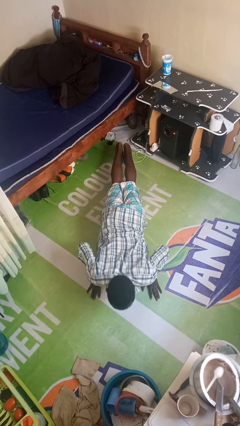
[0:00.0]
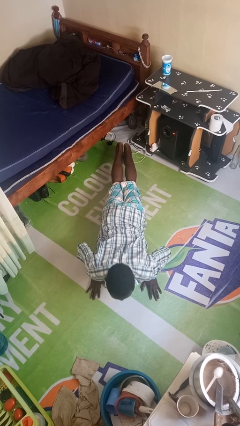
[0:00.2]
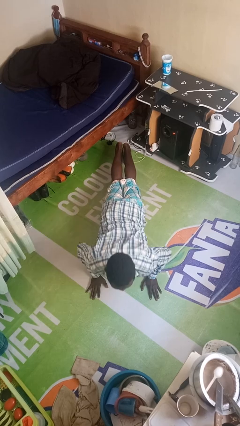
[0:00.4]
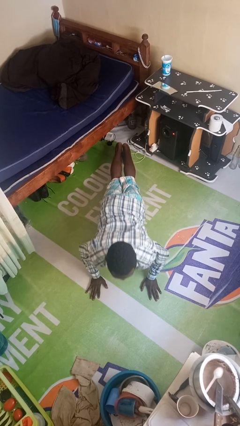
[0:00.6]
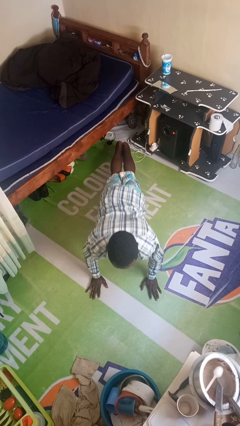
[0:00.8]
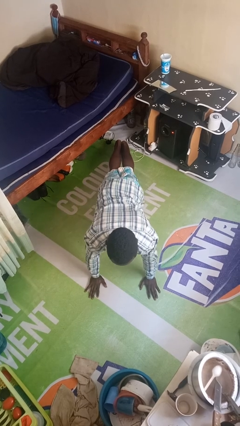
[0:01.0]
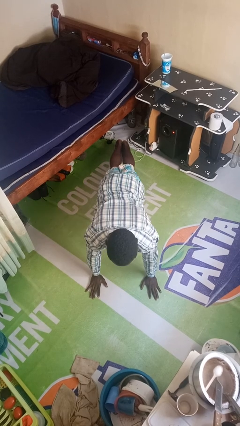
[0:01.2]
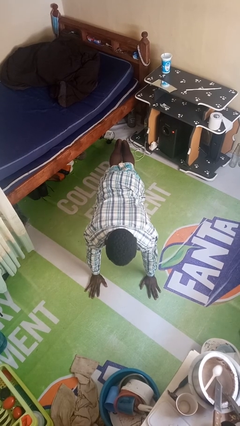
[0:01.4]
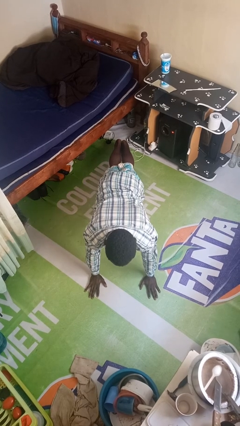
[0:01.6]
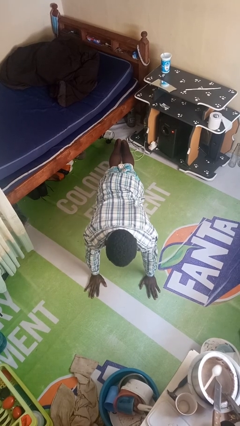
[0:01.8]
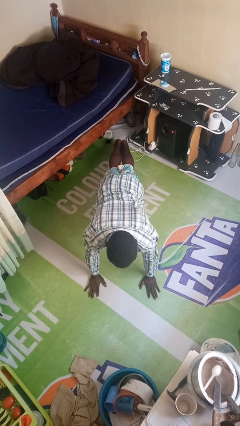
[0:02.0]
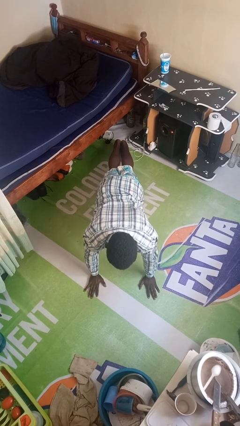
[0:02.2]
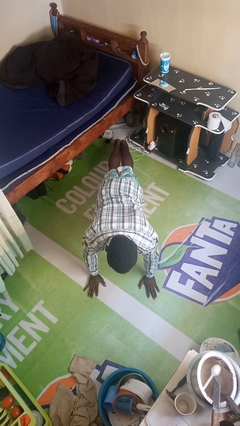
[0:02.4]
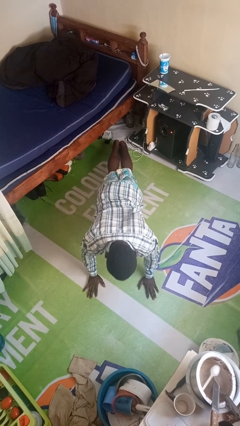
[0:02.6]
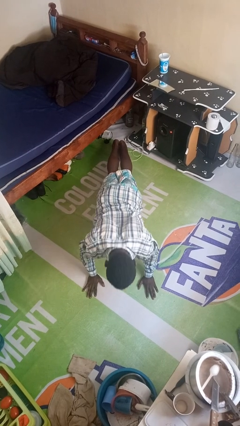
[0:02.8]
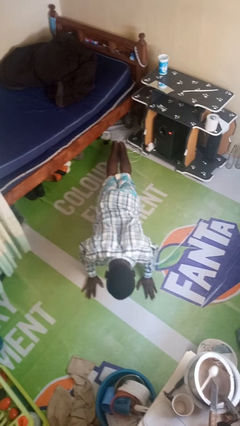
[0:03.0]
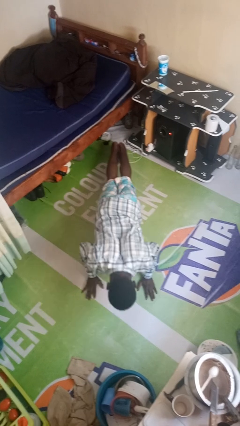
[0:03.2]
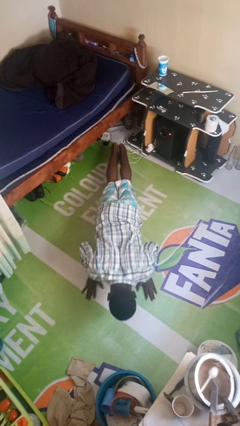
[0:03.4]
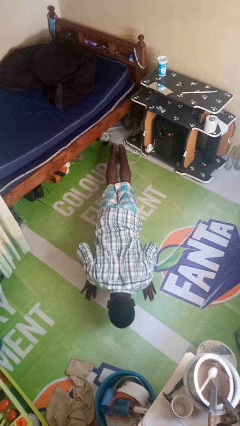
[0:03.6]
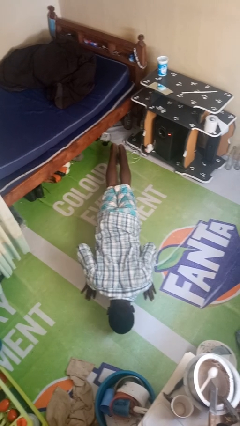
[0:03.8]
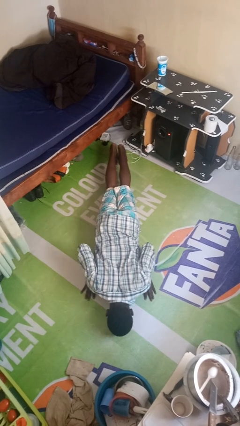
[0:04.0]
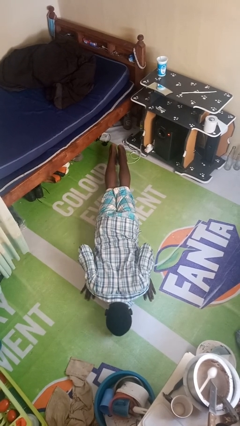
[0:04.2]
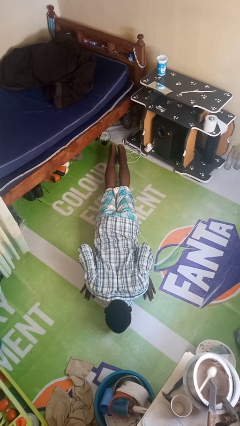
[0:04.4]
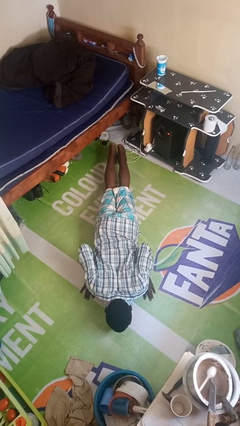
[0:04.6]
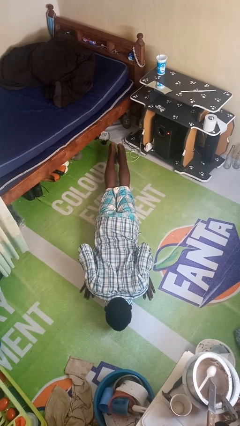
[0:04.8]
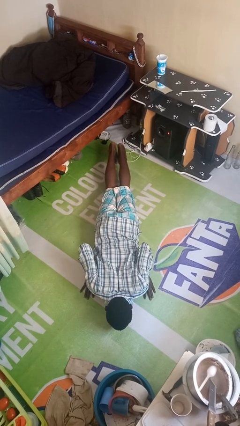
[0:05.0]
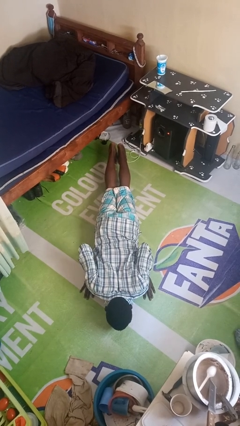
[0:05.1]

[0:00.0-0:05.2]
person exercises with pushup

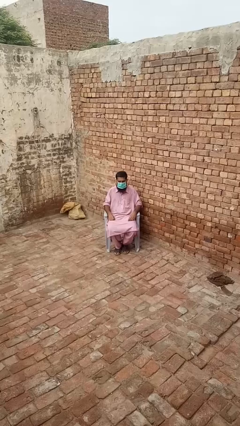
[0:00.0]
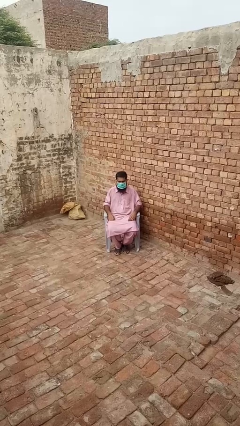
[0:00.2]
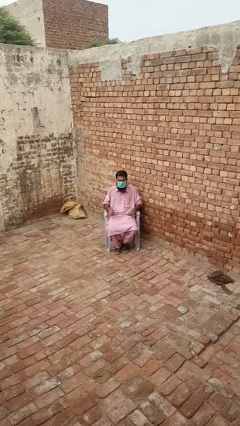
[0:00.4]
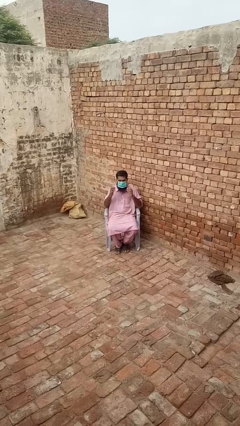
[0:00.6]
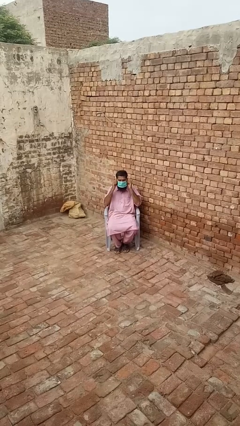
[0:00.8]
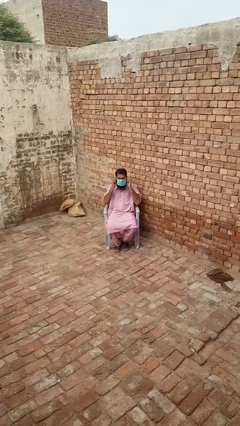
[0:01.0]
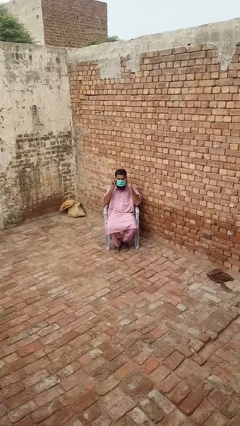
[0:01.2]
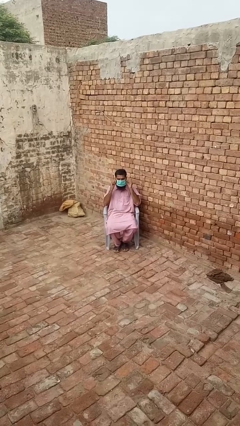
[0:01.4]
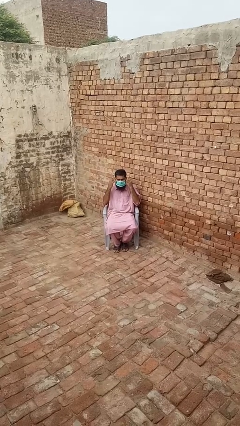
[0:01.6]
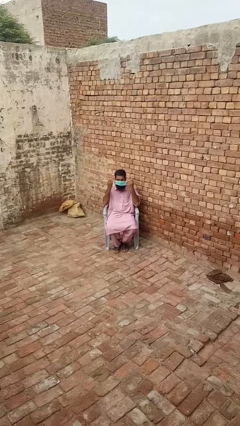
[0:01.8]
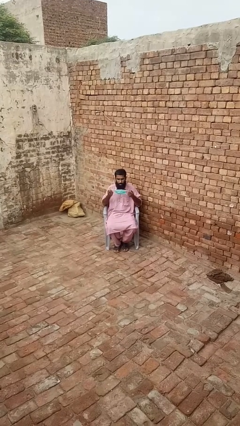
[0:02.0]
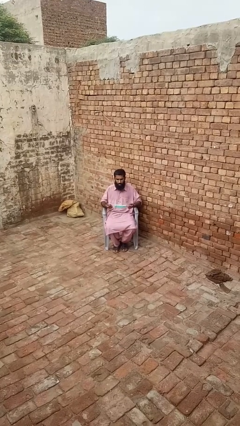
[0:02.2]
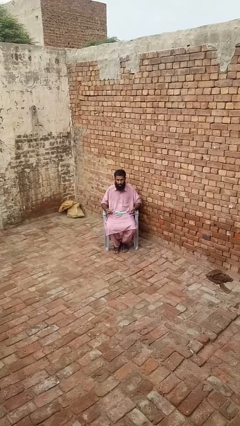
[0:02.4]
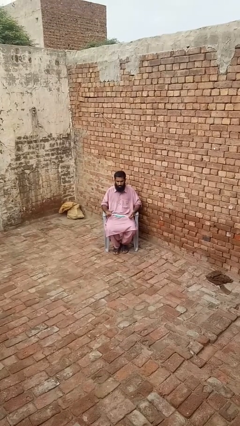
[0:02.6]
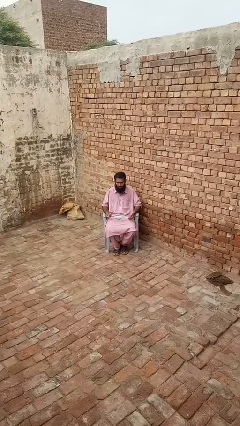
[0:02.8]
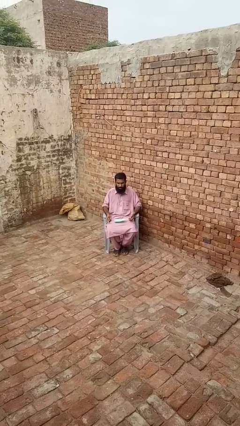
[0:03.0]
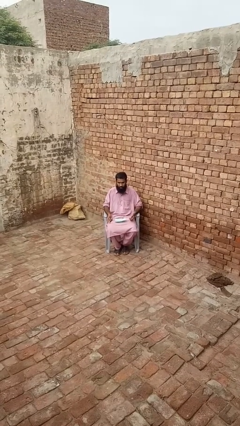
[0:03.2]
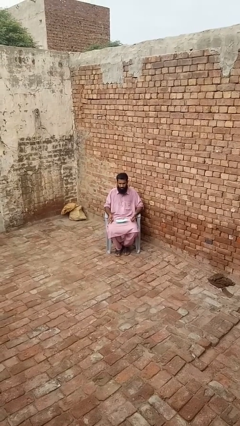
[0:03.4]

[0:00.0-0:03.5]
person takes off facemask

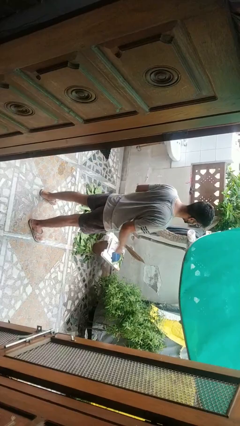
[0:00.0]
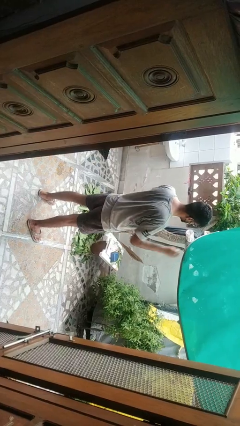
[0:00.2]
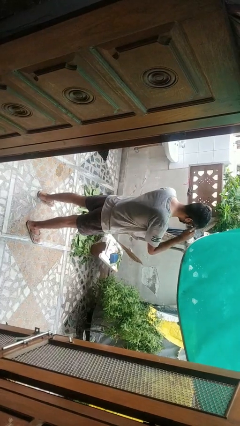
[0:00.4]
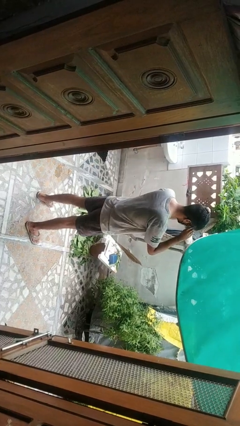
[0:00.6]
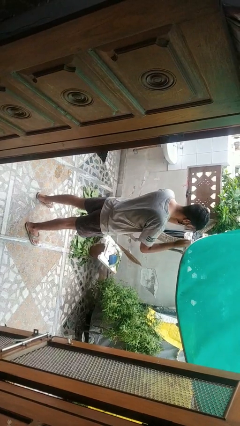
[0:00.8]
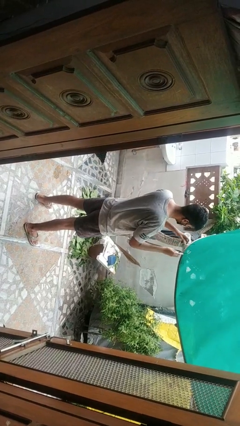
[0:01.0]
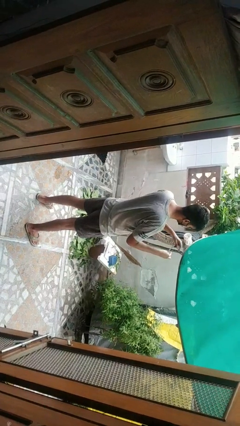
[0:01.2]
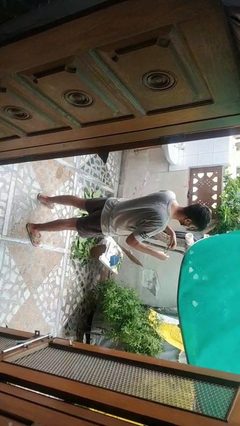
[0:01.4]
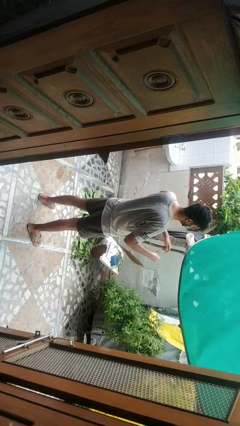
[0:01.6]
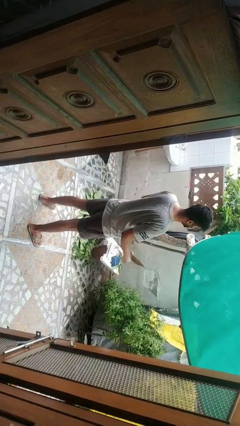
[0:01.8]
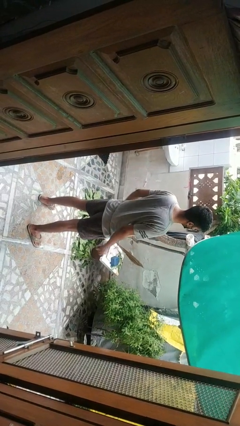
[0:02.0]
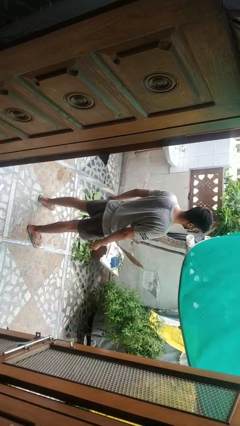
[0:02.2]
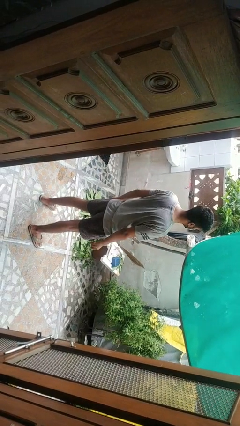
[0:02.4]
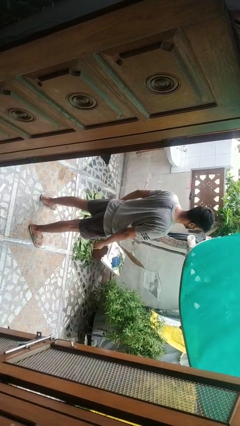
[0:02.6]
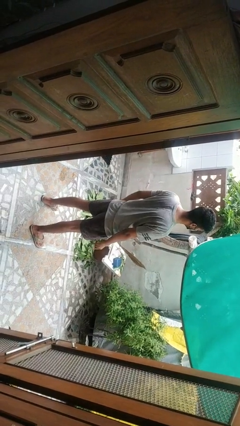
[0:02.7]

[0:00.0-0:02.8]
person takes off glasses

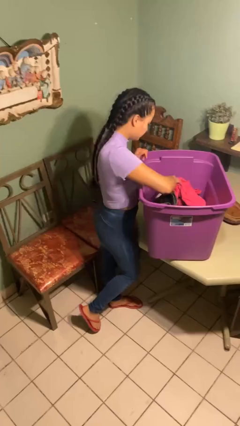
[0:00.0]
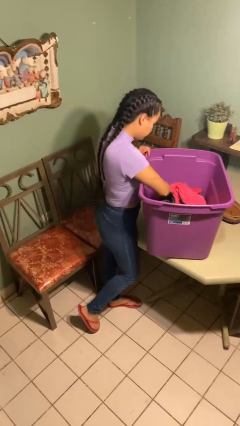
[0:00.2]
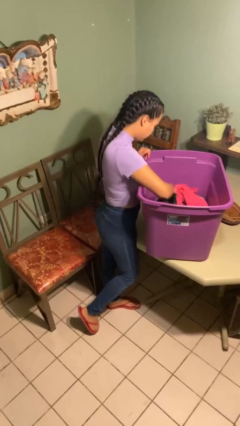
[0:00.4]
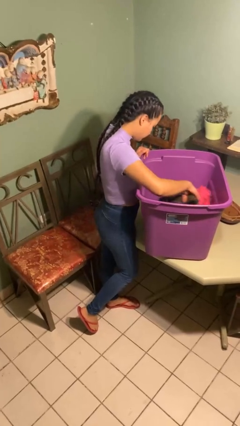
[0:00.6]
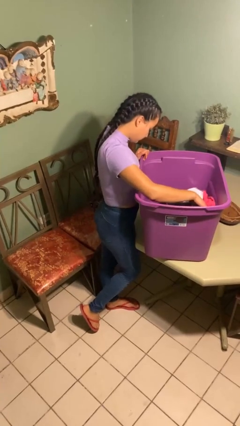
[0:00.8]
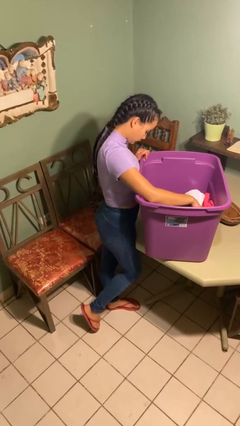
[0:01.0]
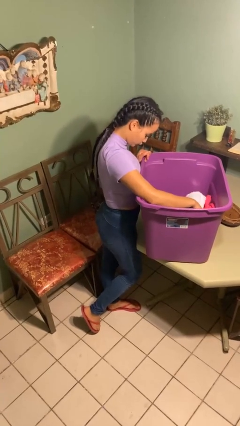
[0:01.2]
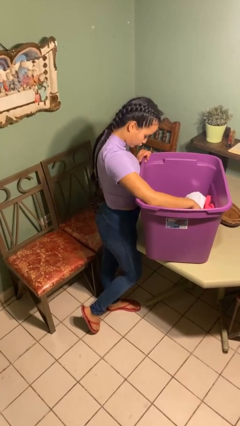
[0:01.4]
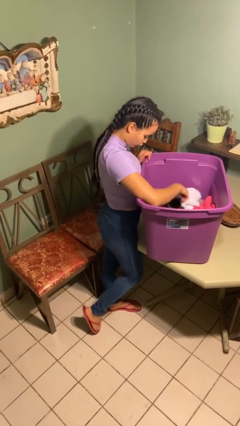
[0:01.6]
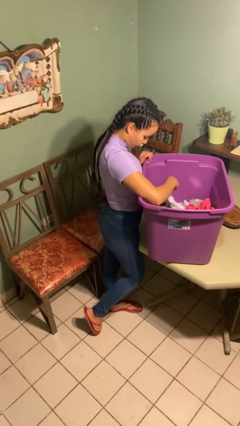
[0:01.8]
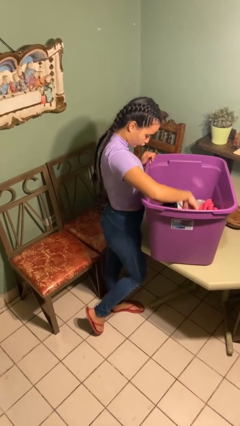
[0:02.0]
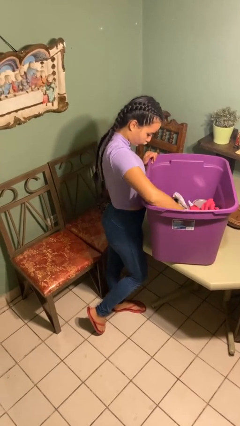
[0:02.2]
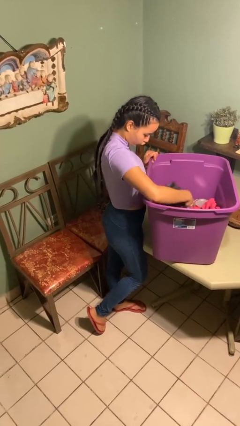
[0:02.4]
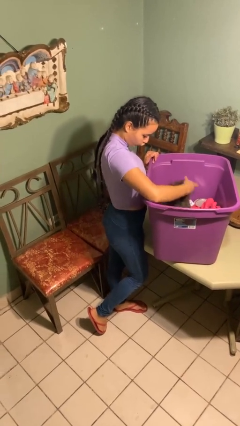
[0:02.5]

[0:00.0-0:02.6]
person searches in box

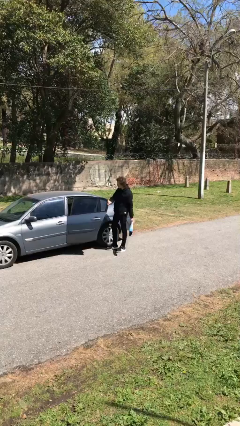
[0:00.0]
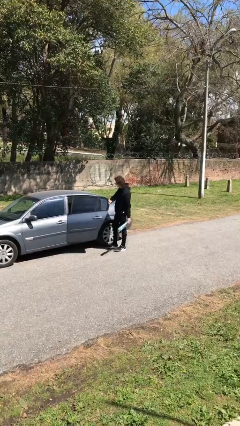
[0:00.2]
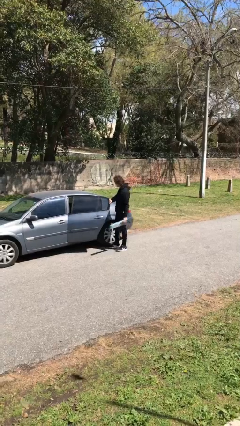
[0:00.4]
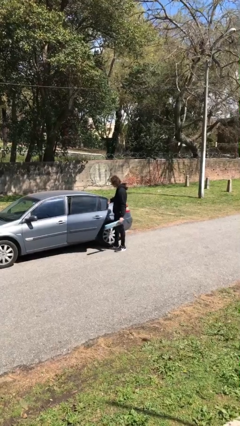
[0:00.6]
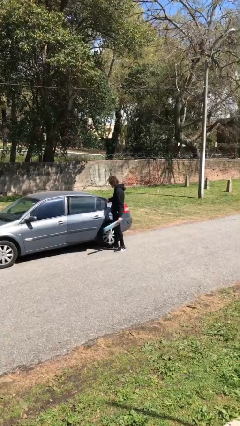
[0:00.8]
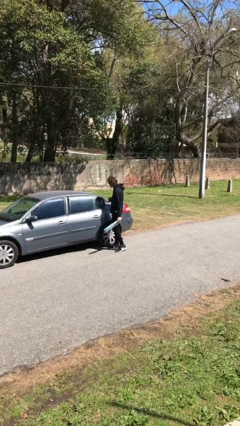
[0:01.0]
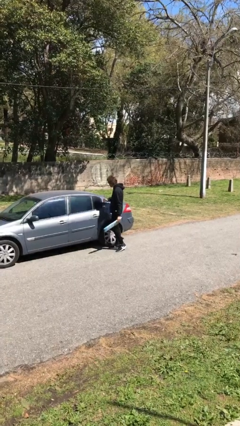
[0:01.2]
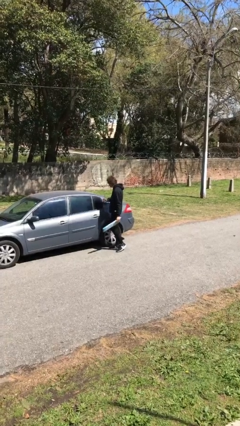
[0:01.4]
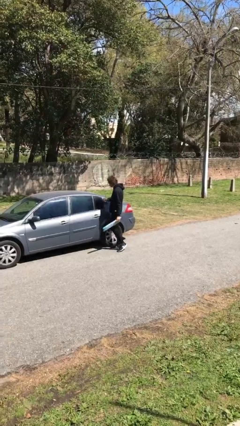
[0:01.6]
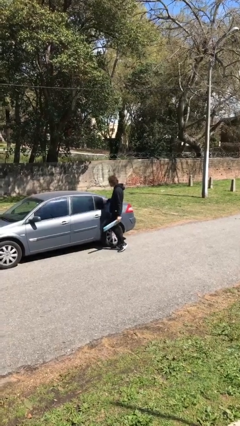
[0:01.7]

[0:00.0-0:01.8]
person closes car door

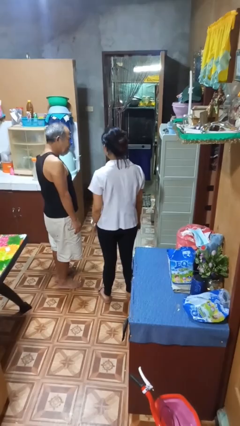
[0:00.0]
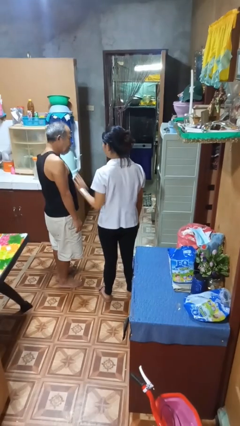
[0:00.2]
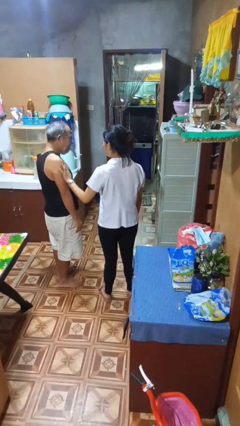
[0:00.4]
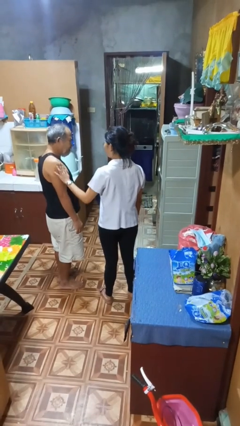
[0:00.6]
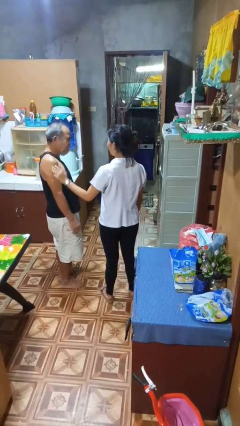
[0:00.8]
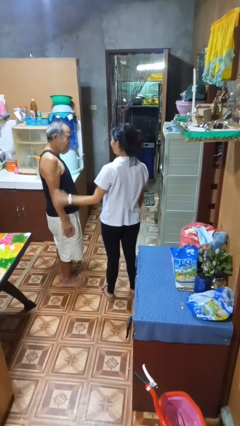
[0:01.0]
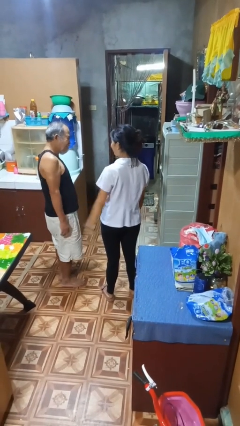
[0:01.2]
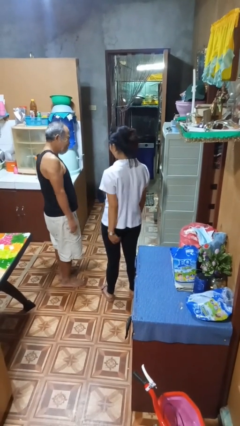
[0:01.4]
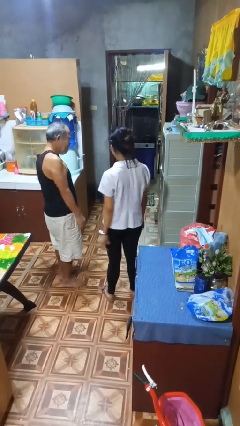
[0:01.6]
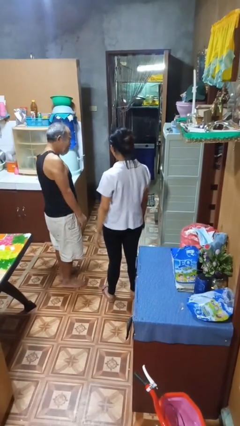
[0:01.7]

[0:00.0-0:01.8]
person shoves person

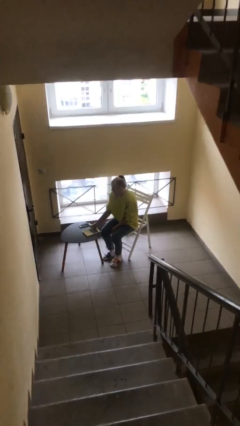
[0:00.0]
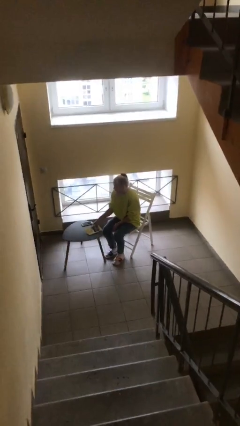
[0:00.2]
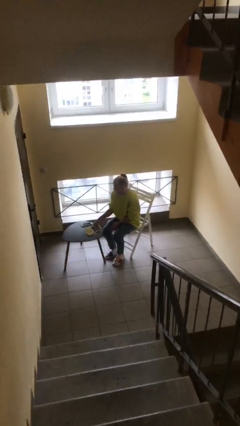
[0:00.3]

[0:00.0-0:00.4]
person picks up object from table
